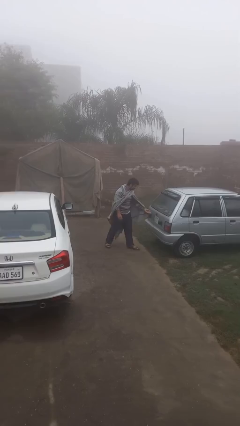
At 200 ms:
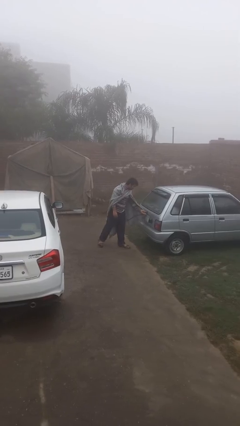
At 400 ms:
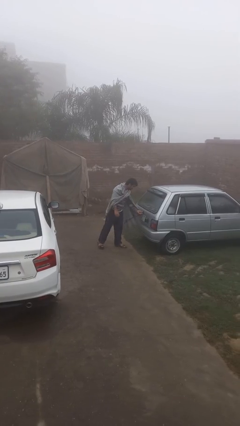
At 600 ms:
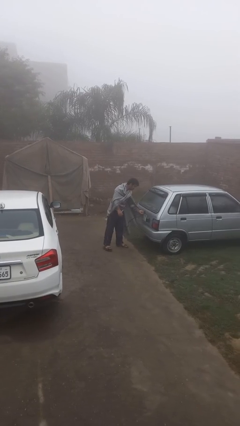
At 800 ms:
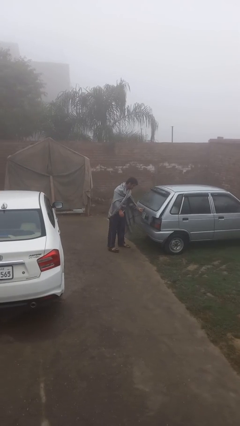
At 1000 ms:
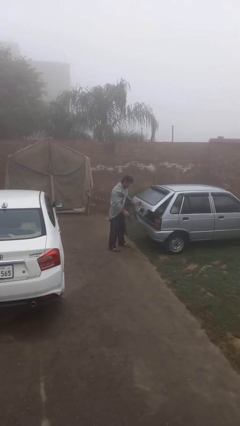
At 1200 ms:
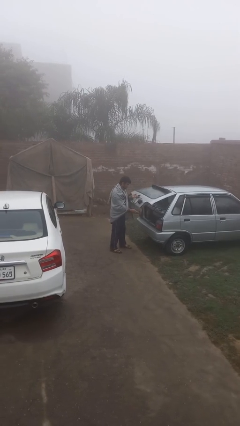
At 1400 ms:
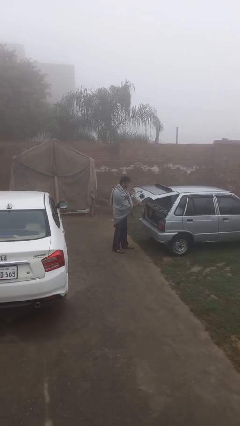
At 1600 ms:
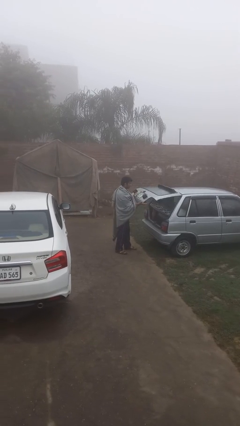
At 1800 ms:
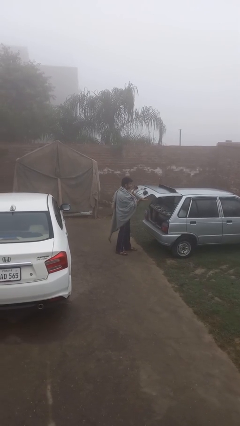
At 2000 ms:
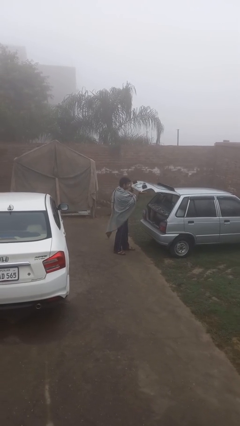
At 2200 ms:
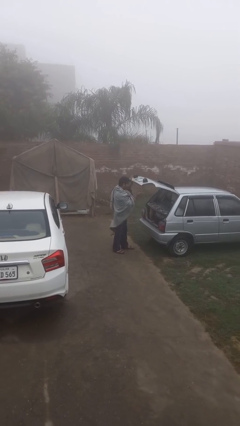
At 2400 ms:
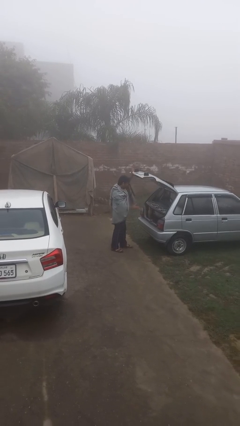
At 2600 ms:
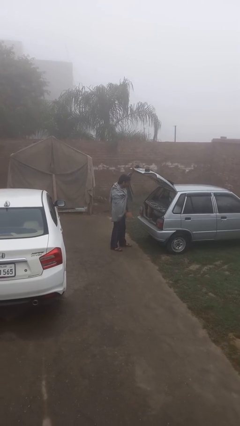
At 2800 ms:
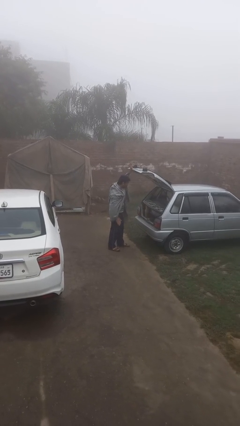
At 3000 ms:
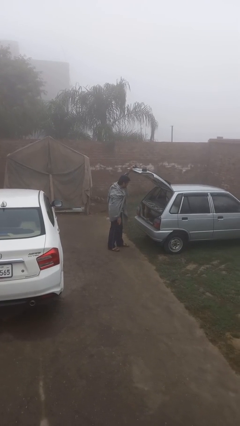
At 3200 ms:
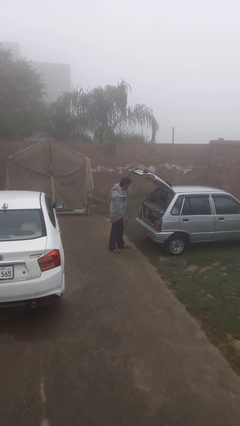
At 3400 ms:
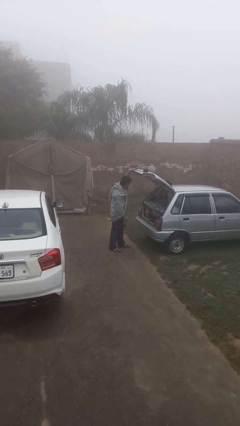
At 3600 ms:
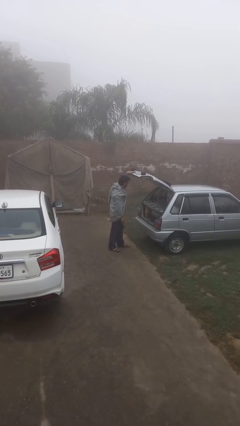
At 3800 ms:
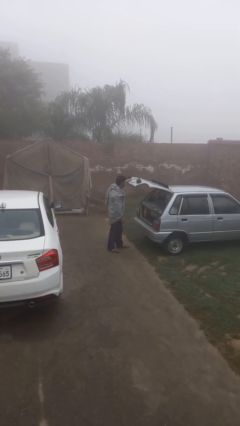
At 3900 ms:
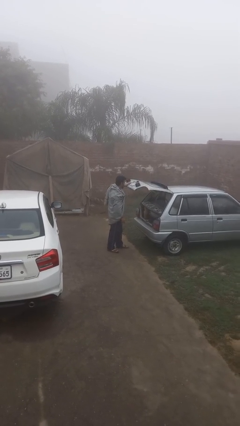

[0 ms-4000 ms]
person opens car trunk

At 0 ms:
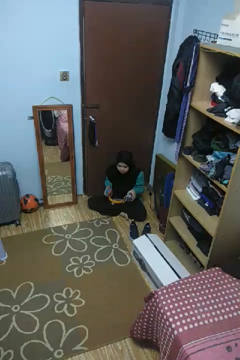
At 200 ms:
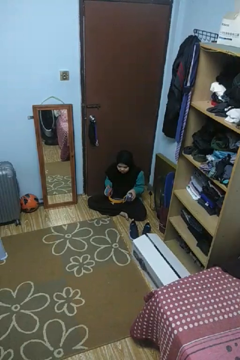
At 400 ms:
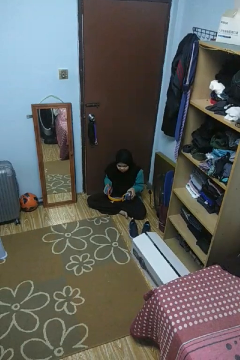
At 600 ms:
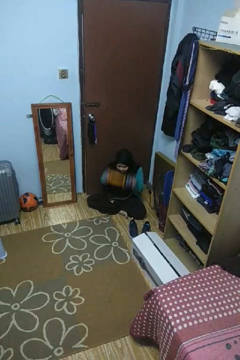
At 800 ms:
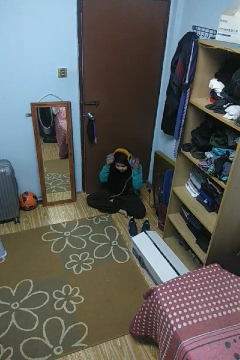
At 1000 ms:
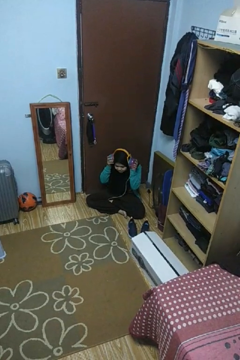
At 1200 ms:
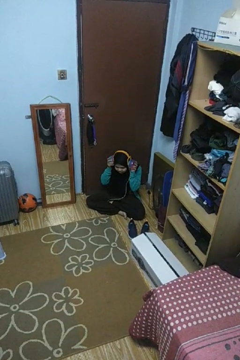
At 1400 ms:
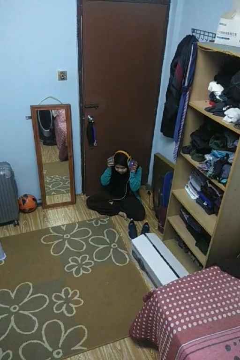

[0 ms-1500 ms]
person puts on headphones

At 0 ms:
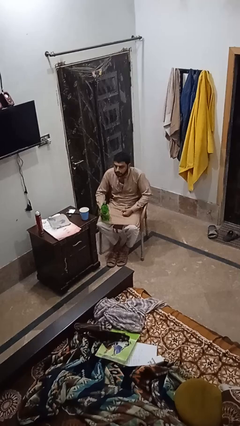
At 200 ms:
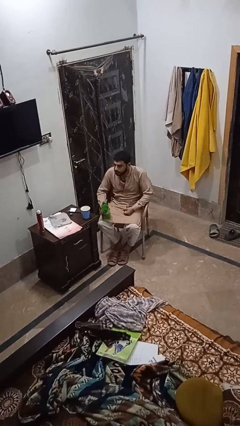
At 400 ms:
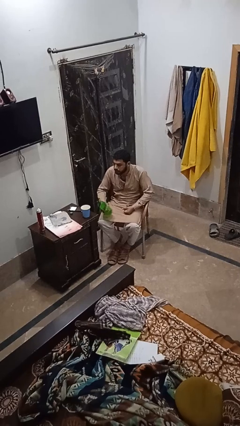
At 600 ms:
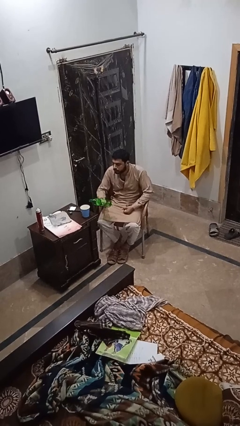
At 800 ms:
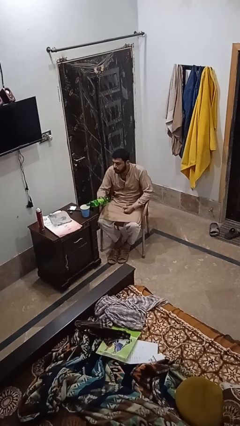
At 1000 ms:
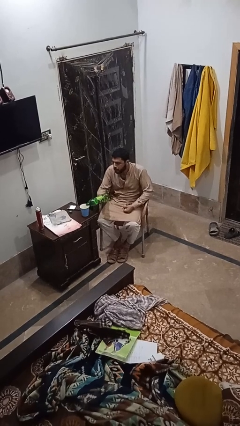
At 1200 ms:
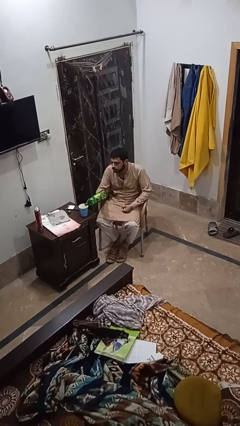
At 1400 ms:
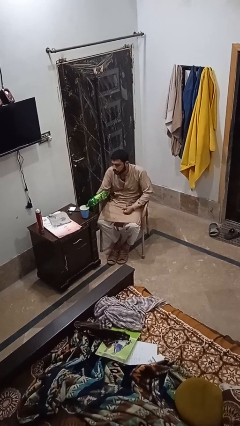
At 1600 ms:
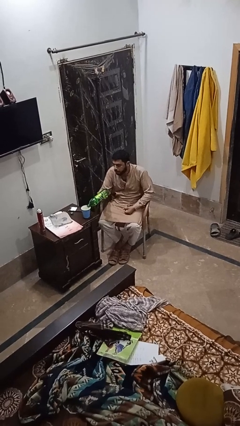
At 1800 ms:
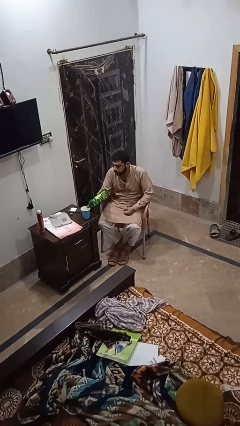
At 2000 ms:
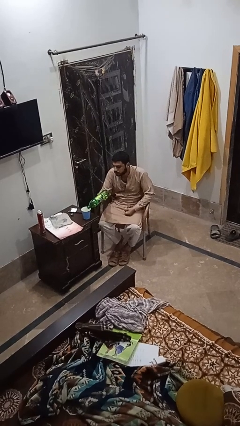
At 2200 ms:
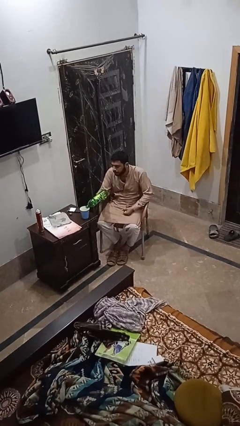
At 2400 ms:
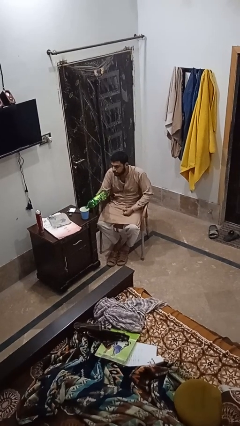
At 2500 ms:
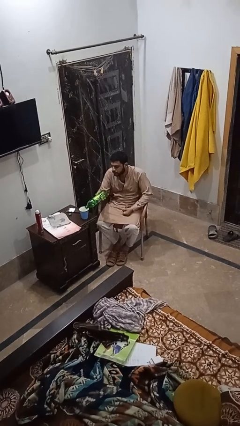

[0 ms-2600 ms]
person pours liquid into cup

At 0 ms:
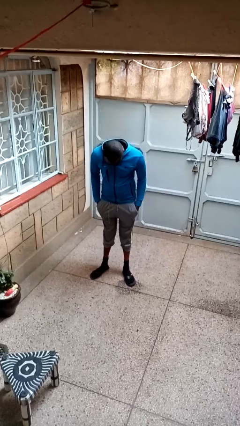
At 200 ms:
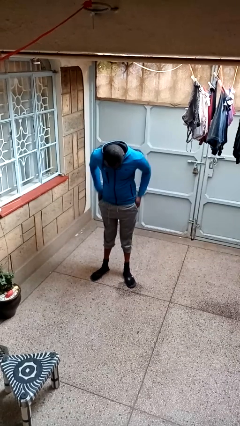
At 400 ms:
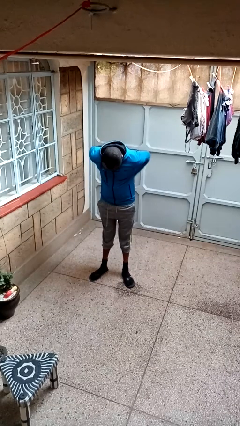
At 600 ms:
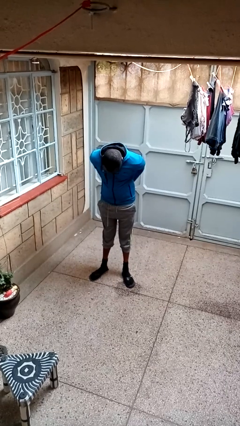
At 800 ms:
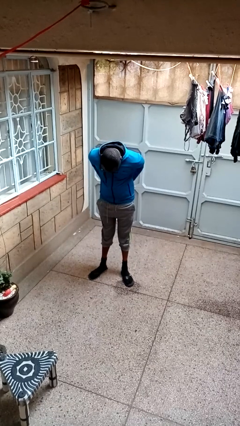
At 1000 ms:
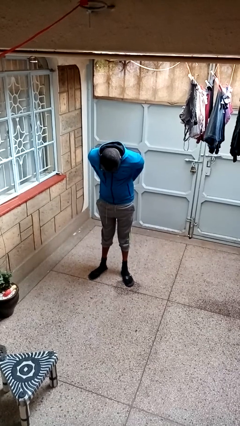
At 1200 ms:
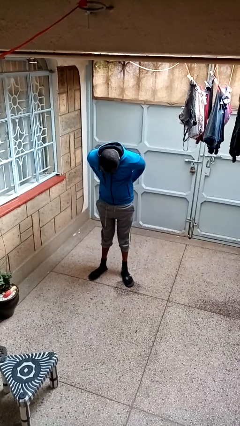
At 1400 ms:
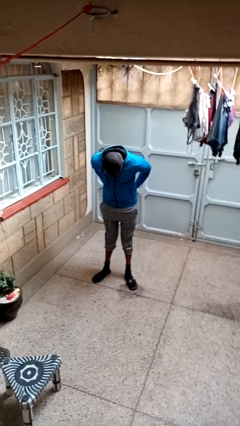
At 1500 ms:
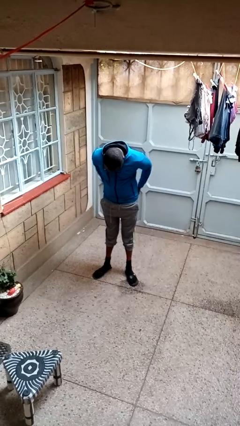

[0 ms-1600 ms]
person puts hands in back pockets

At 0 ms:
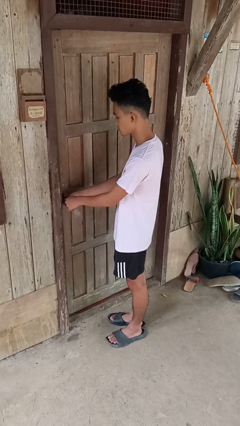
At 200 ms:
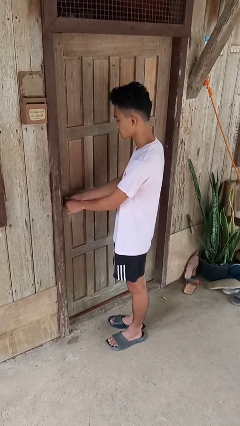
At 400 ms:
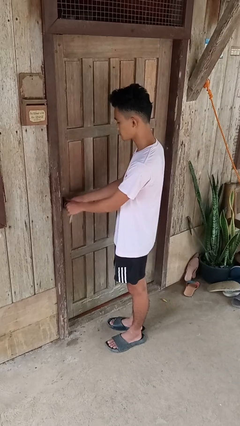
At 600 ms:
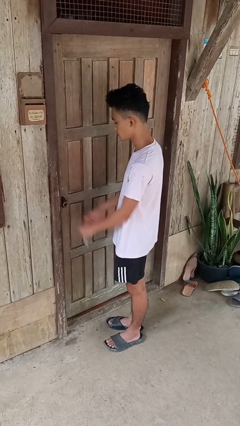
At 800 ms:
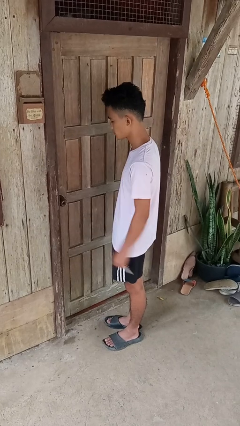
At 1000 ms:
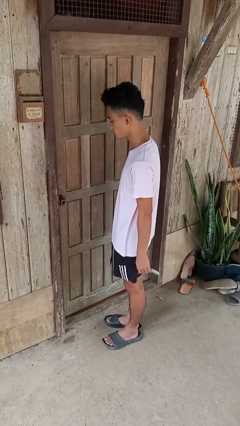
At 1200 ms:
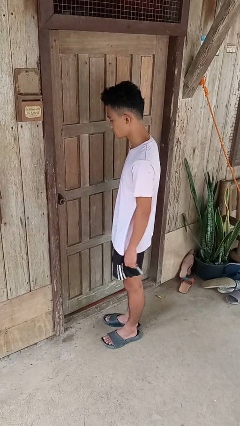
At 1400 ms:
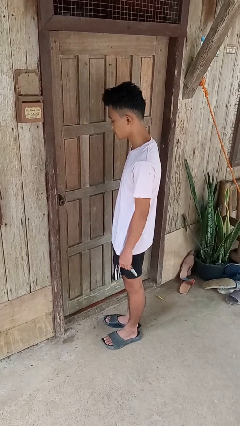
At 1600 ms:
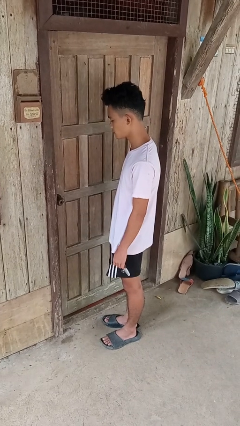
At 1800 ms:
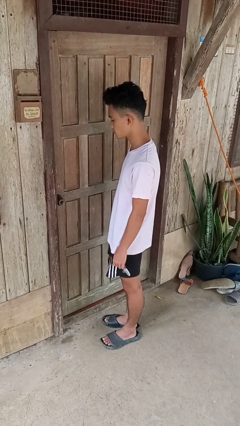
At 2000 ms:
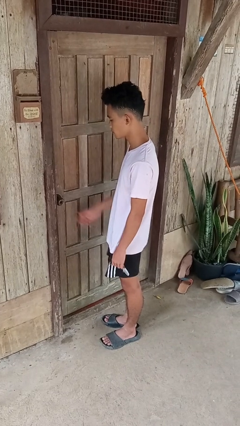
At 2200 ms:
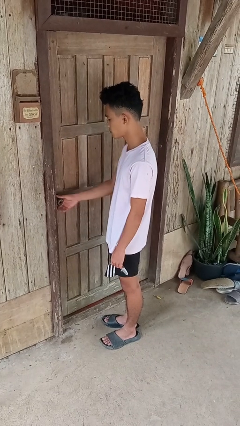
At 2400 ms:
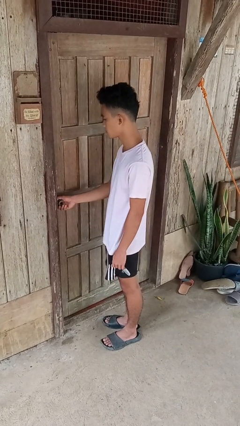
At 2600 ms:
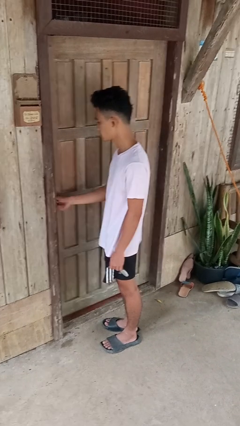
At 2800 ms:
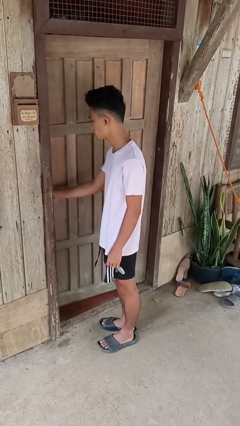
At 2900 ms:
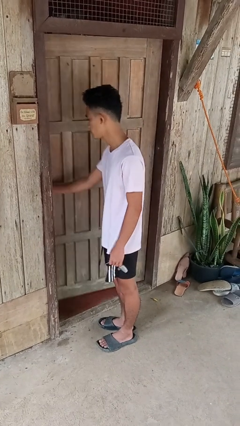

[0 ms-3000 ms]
person unlocks door with keys

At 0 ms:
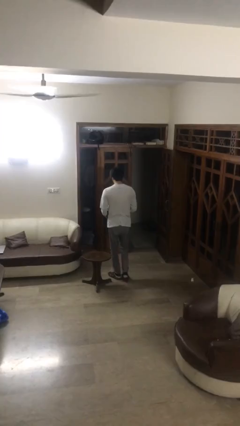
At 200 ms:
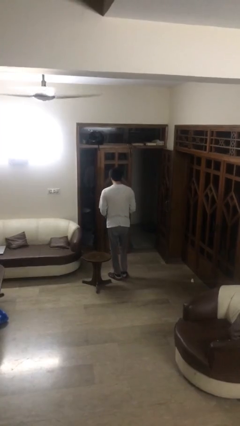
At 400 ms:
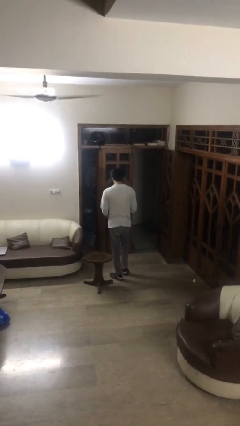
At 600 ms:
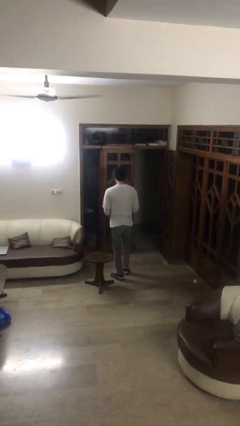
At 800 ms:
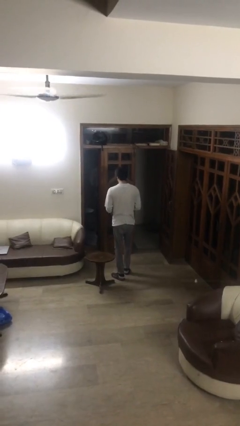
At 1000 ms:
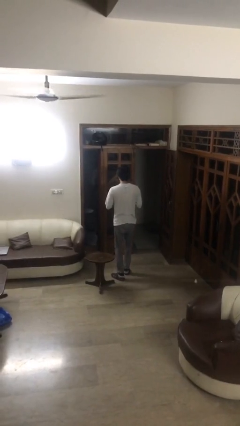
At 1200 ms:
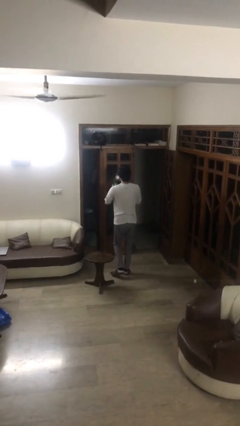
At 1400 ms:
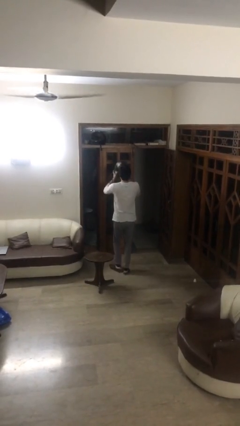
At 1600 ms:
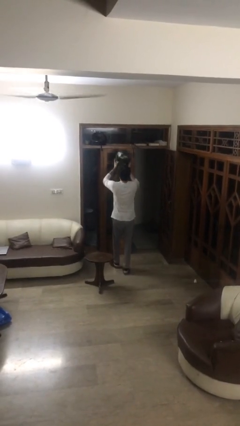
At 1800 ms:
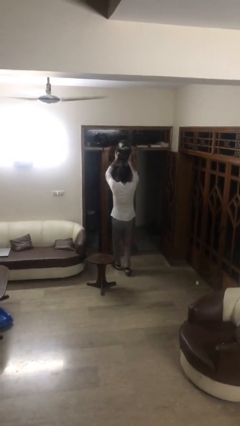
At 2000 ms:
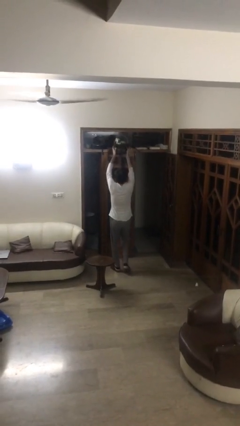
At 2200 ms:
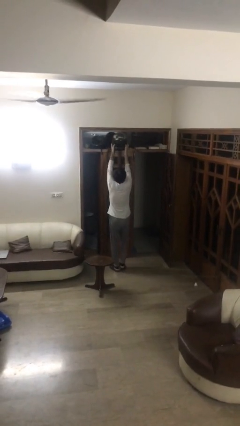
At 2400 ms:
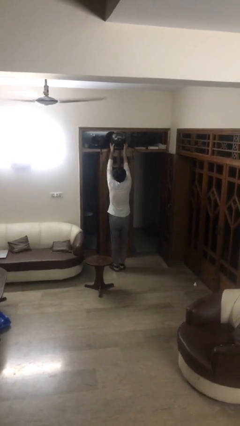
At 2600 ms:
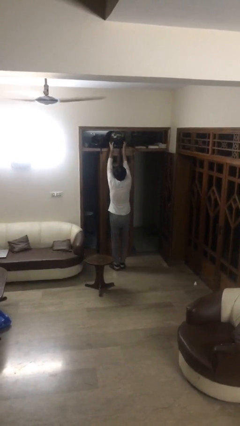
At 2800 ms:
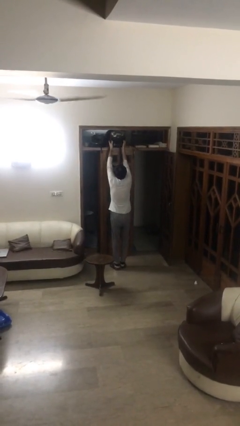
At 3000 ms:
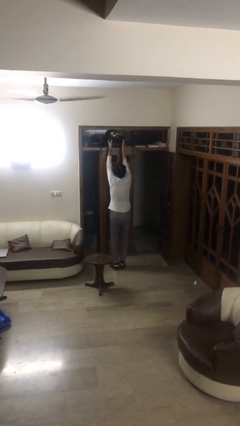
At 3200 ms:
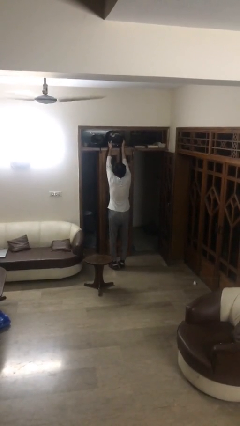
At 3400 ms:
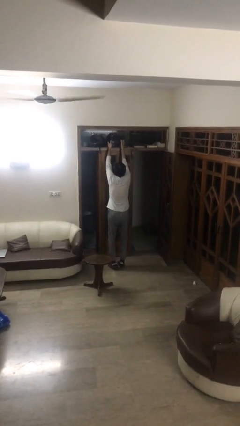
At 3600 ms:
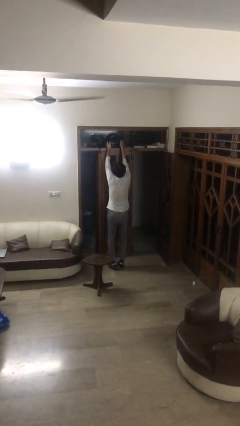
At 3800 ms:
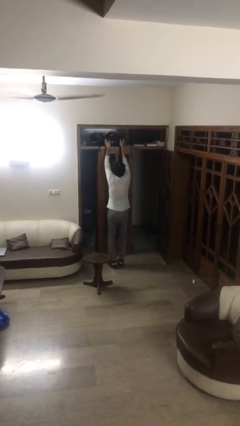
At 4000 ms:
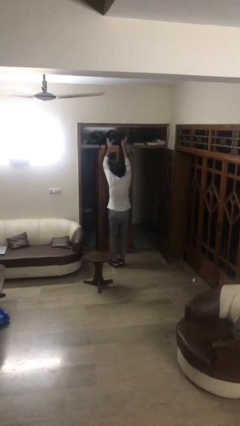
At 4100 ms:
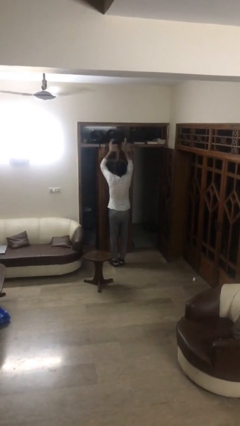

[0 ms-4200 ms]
person puts down object on shelf

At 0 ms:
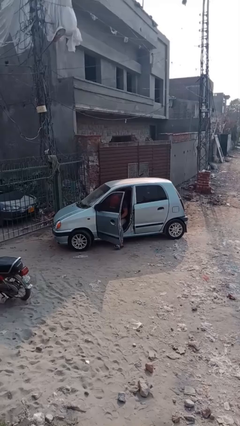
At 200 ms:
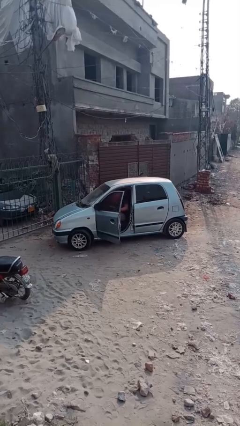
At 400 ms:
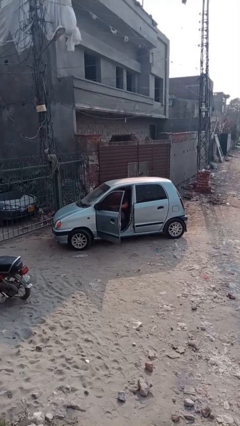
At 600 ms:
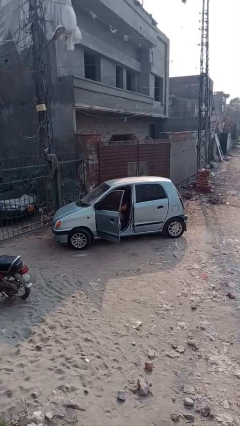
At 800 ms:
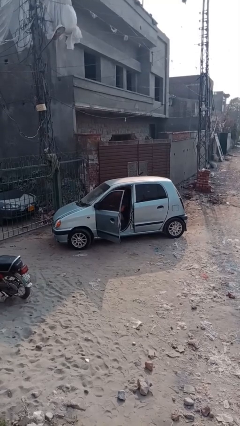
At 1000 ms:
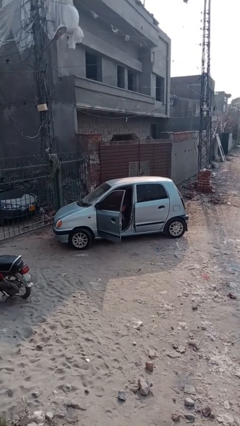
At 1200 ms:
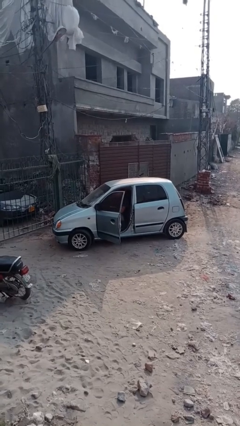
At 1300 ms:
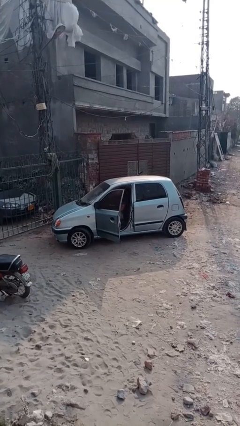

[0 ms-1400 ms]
person enters car
